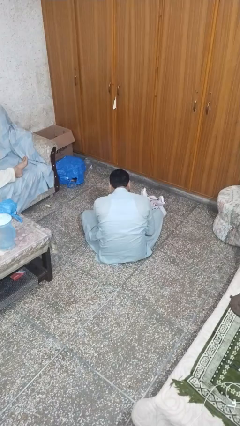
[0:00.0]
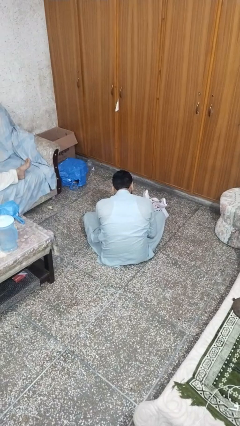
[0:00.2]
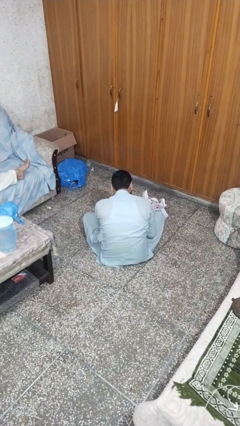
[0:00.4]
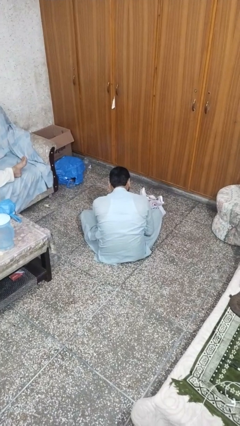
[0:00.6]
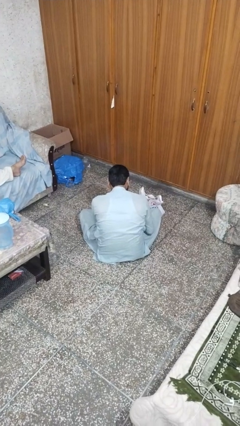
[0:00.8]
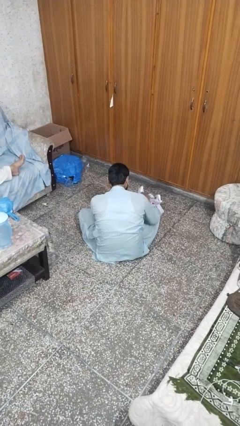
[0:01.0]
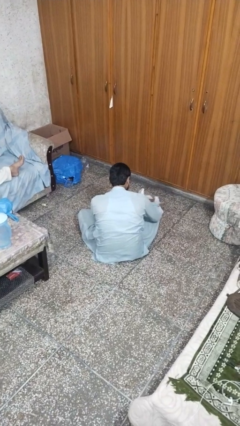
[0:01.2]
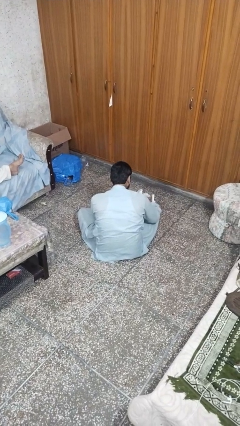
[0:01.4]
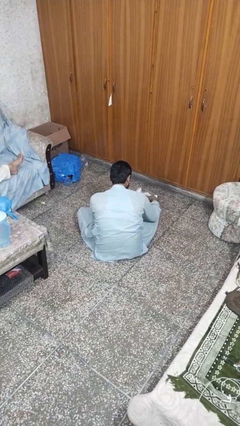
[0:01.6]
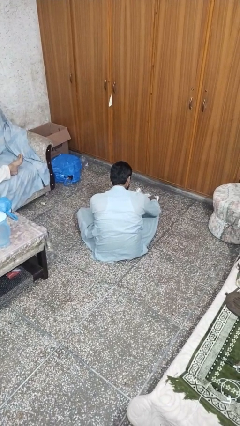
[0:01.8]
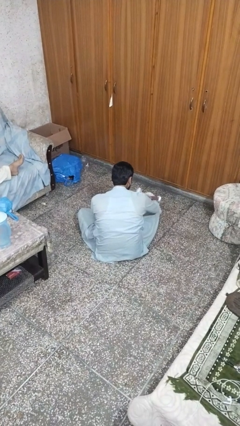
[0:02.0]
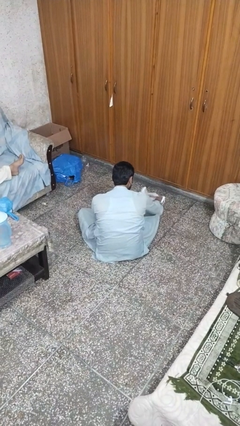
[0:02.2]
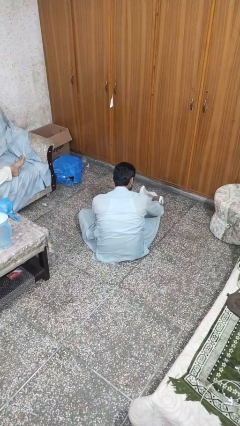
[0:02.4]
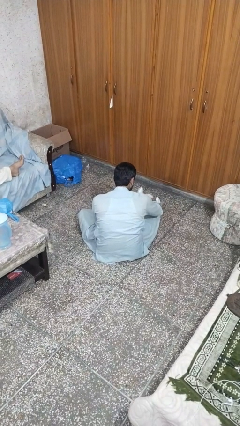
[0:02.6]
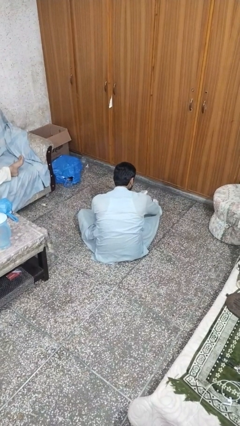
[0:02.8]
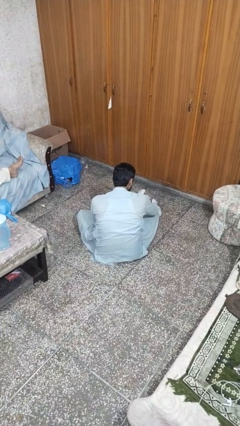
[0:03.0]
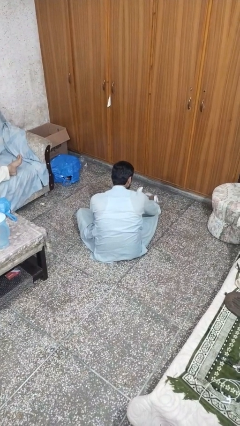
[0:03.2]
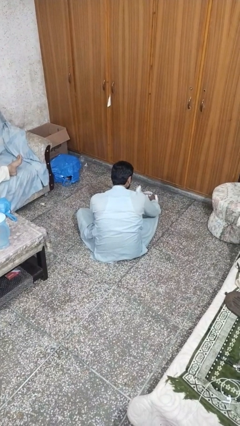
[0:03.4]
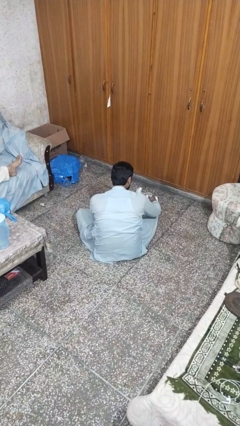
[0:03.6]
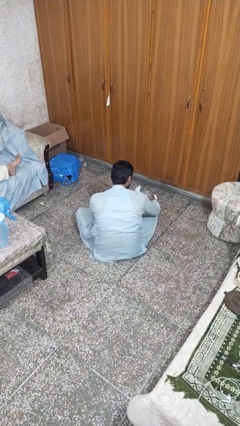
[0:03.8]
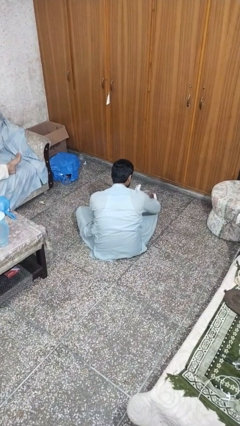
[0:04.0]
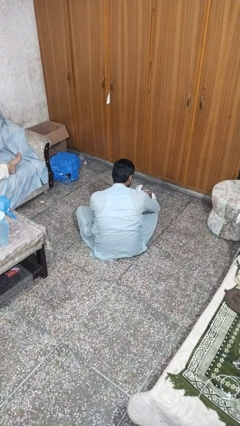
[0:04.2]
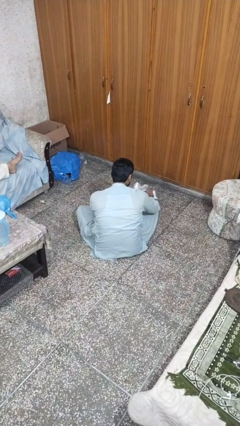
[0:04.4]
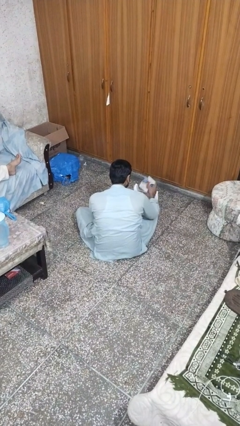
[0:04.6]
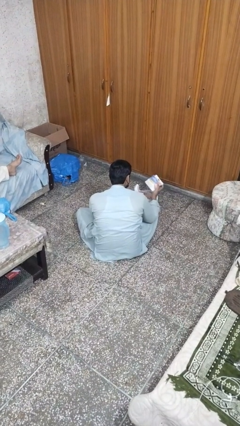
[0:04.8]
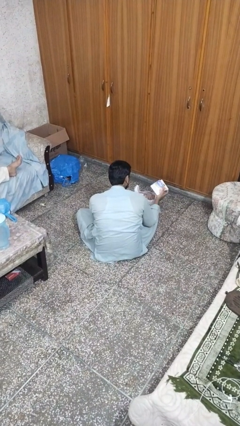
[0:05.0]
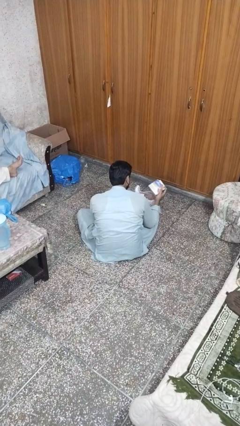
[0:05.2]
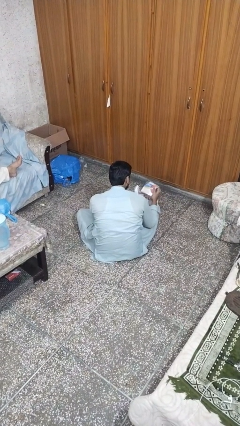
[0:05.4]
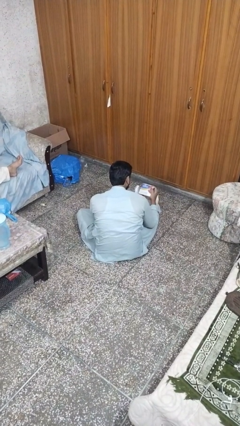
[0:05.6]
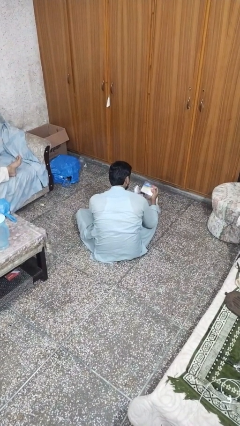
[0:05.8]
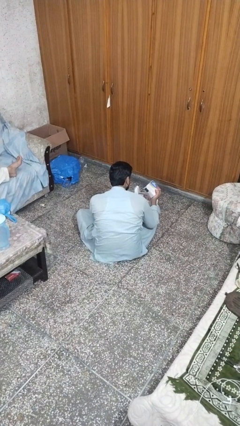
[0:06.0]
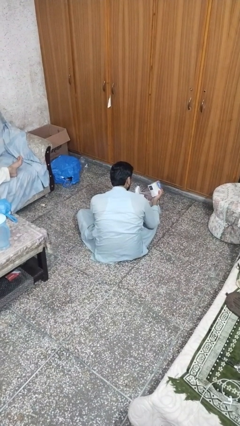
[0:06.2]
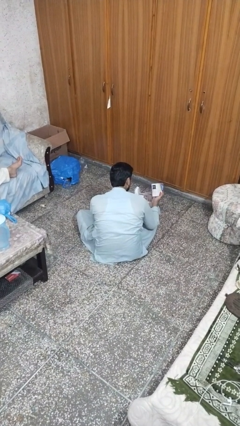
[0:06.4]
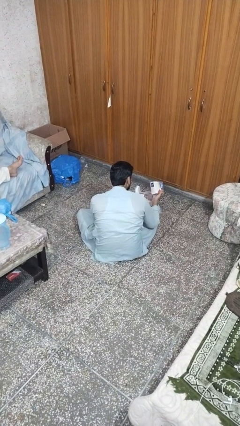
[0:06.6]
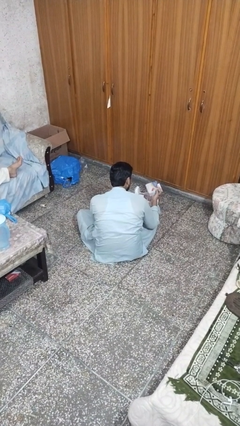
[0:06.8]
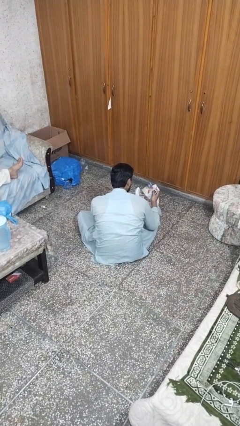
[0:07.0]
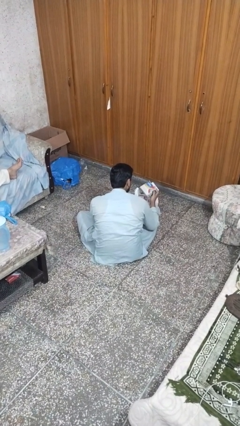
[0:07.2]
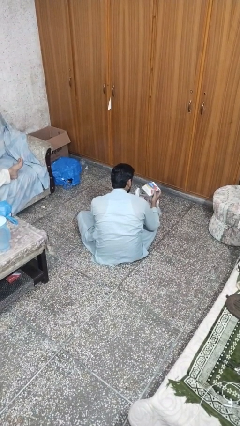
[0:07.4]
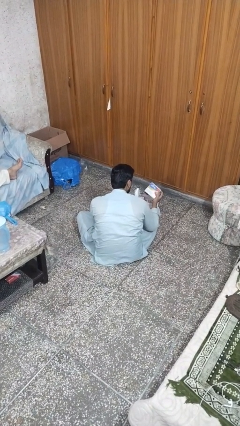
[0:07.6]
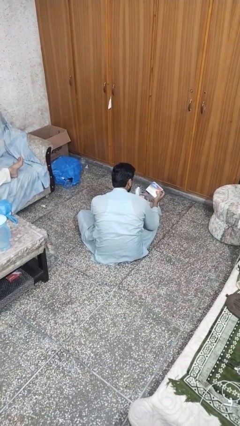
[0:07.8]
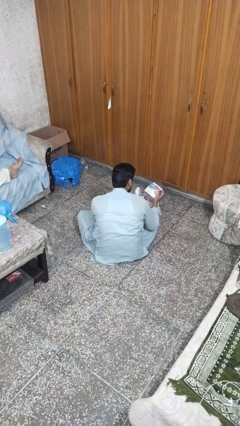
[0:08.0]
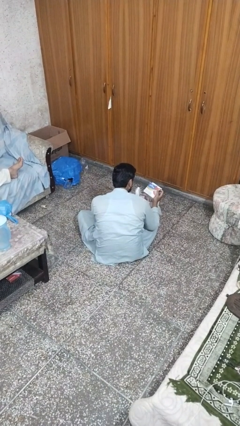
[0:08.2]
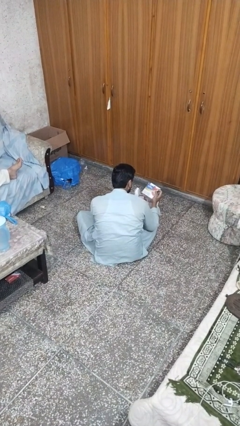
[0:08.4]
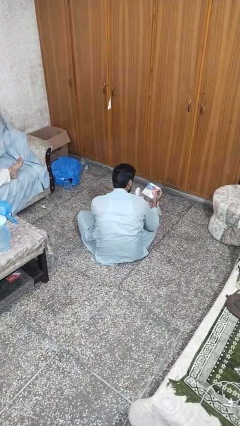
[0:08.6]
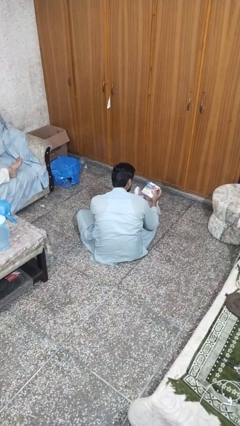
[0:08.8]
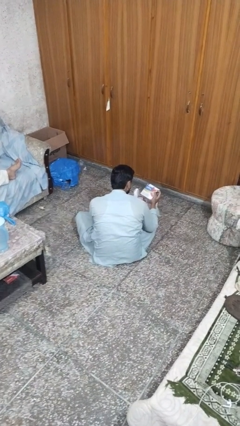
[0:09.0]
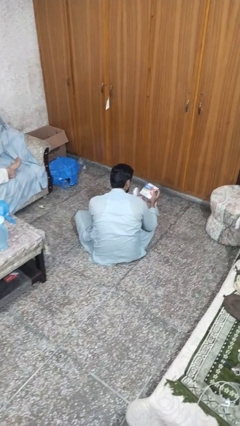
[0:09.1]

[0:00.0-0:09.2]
person takes object from bag

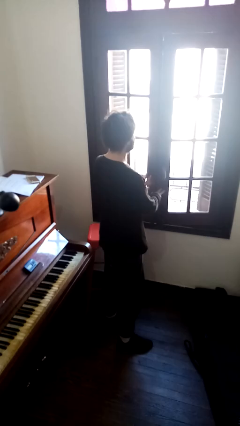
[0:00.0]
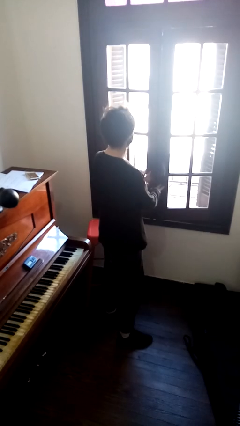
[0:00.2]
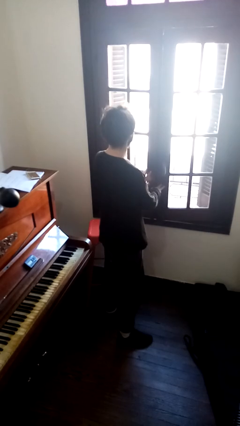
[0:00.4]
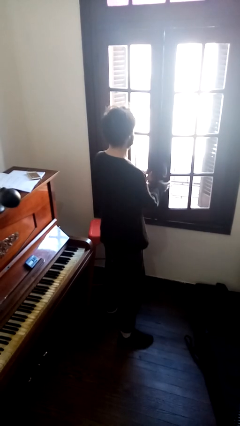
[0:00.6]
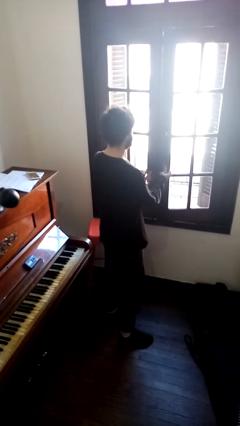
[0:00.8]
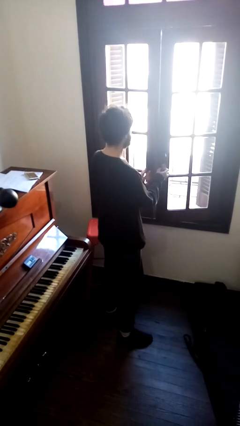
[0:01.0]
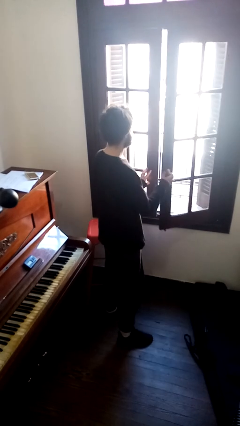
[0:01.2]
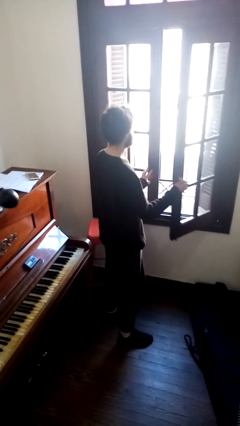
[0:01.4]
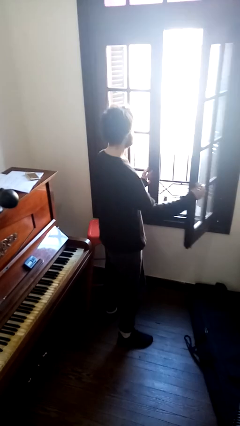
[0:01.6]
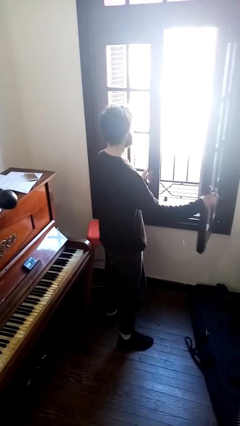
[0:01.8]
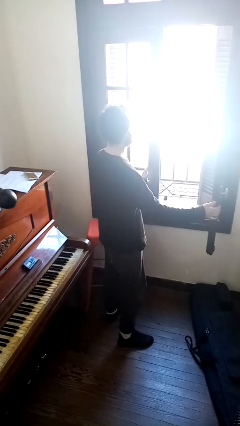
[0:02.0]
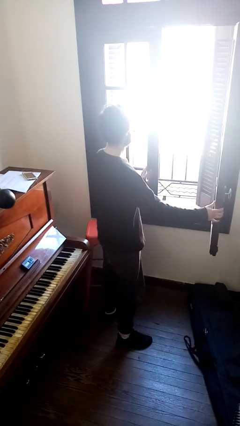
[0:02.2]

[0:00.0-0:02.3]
person opens home window

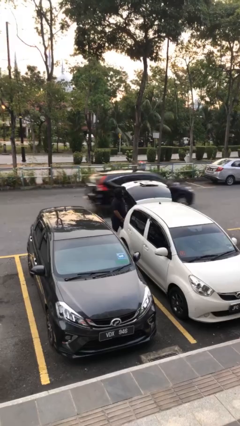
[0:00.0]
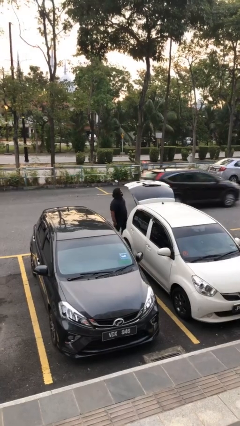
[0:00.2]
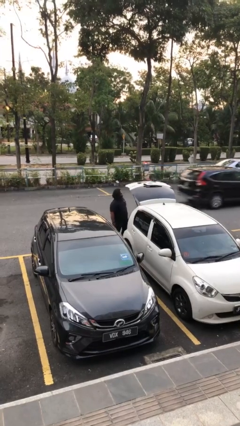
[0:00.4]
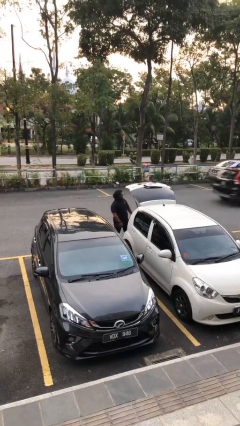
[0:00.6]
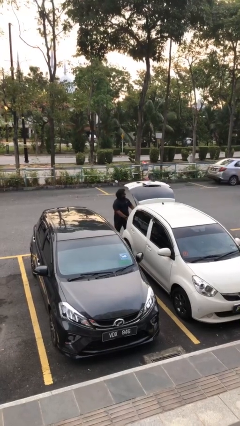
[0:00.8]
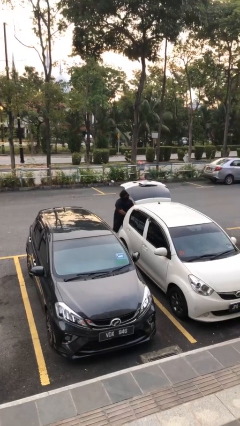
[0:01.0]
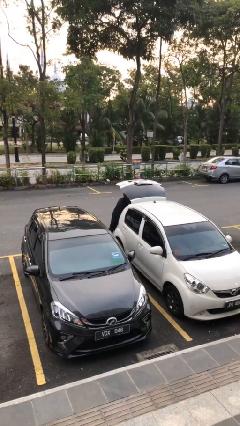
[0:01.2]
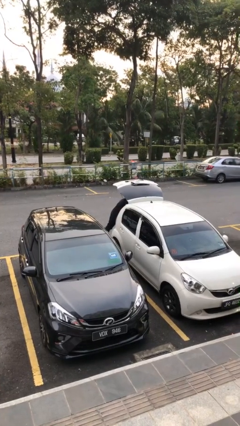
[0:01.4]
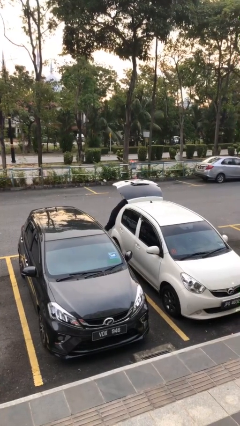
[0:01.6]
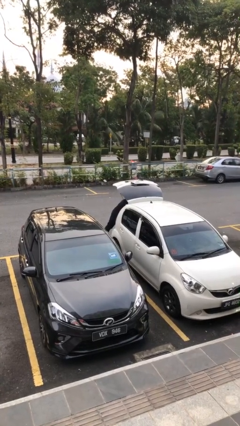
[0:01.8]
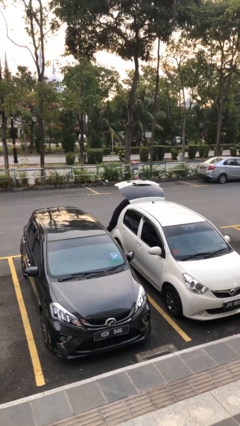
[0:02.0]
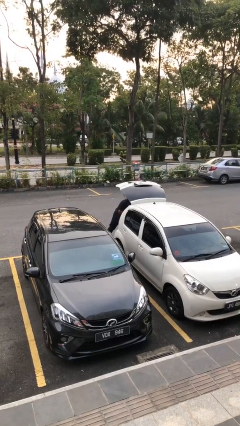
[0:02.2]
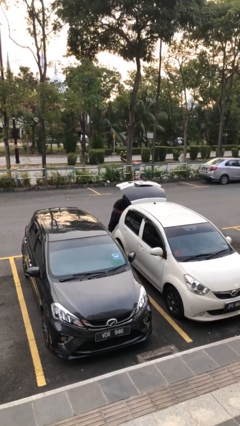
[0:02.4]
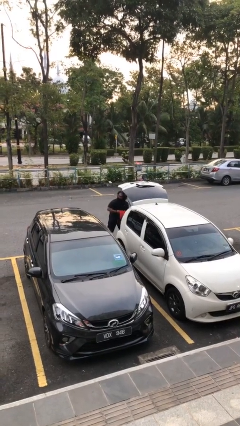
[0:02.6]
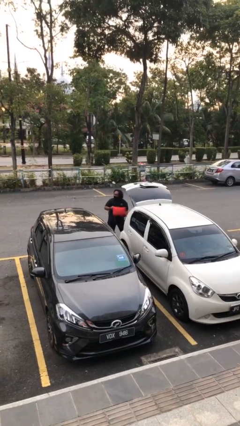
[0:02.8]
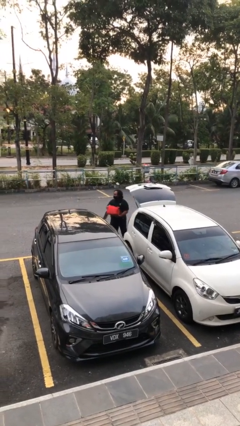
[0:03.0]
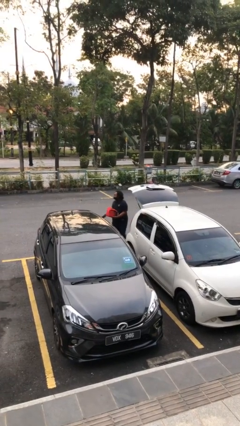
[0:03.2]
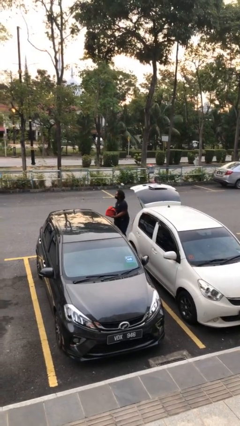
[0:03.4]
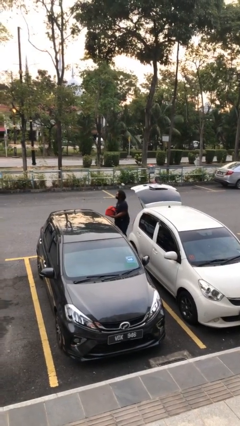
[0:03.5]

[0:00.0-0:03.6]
person unloads car

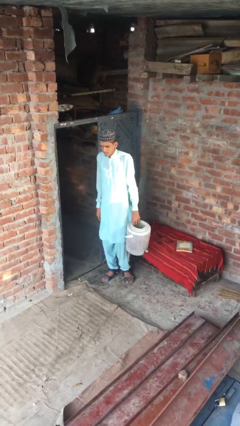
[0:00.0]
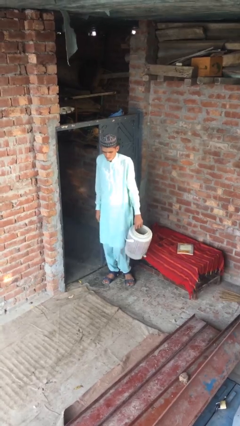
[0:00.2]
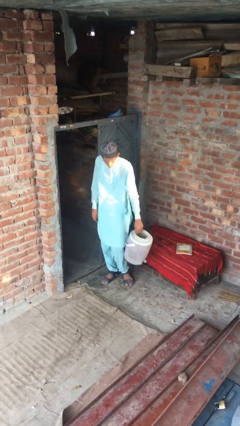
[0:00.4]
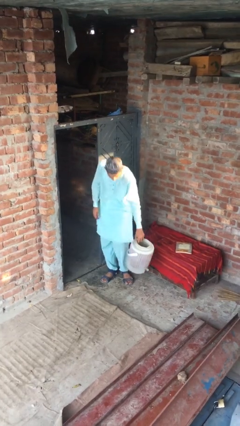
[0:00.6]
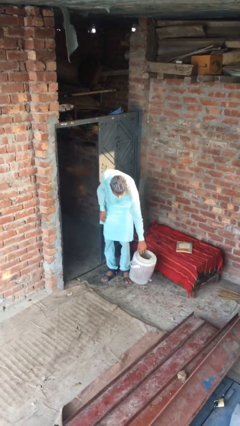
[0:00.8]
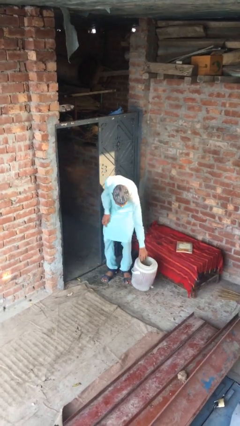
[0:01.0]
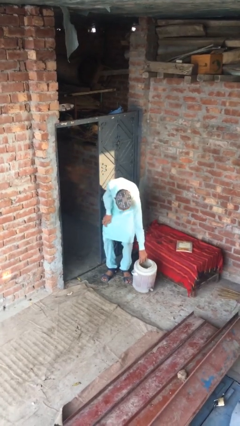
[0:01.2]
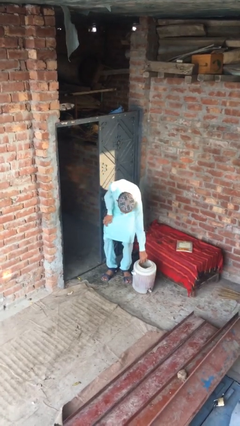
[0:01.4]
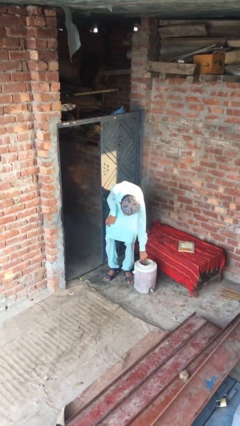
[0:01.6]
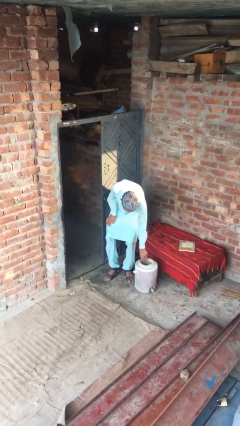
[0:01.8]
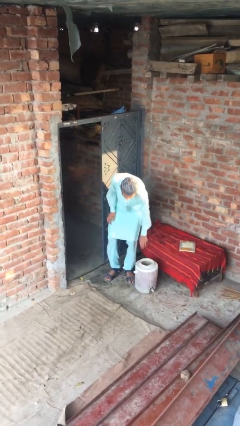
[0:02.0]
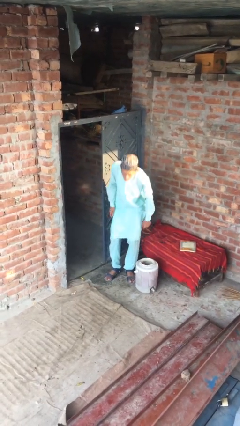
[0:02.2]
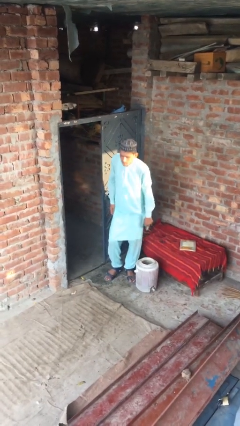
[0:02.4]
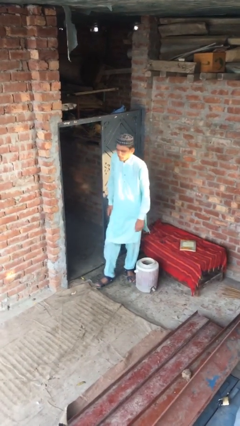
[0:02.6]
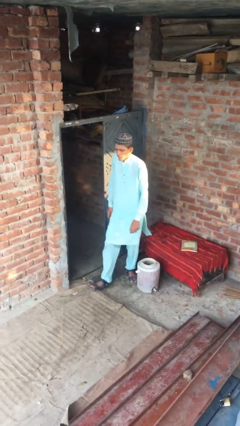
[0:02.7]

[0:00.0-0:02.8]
person puts down object on floor

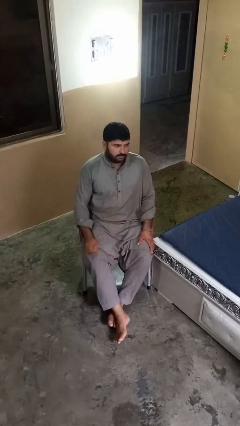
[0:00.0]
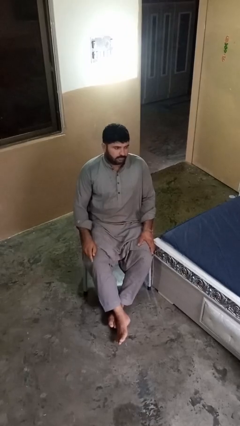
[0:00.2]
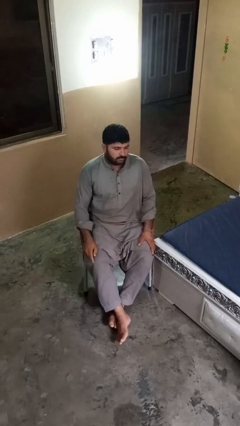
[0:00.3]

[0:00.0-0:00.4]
person gestures be quiet
